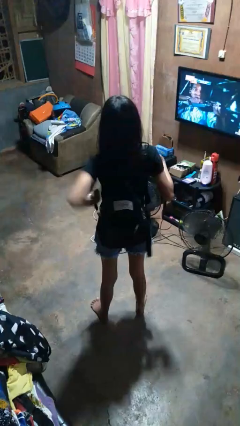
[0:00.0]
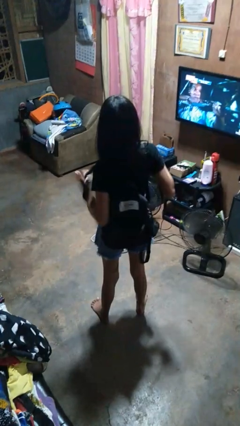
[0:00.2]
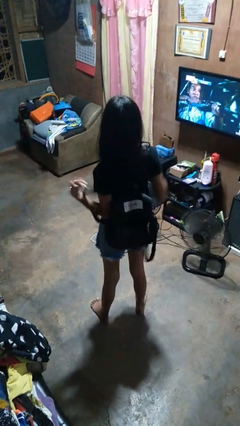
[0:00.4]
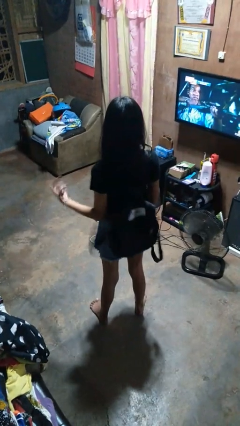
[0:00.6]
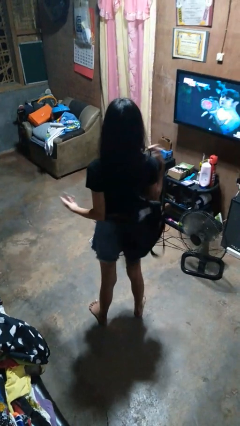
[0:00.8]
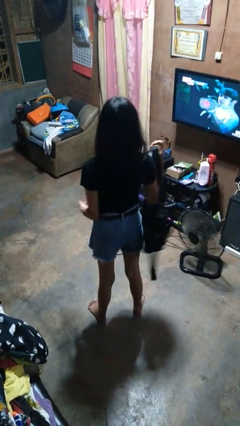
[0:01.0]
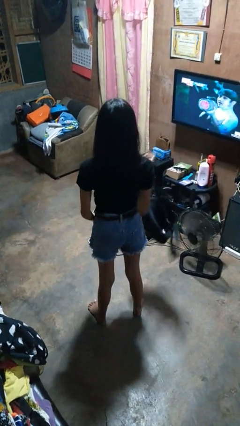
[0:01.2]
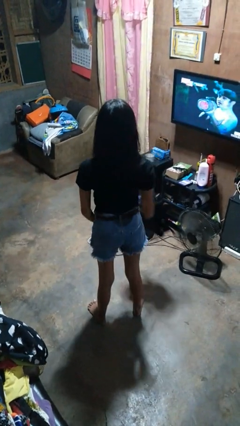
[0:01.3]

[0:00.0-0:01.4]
person takes off backpack

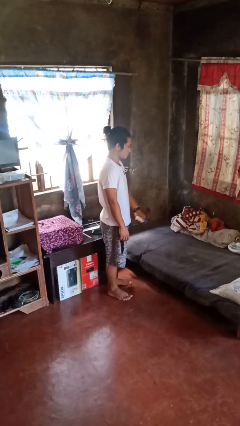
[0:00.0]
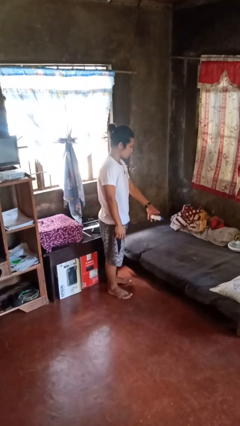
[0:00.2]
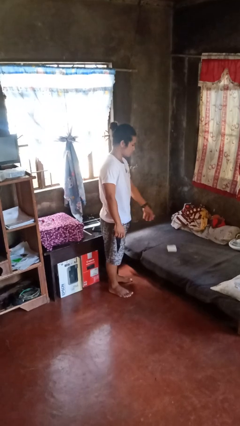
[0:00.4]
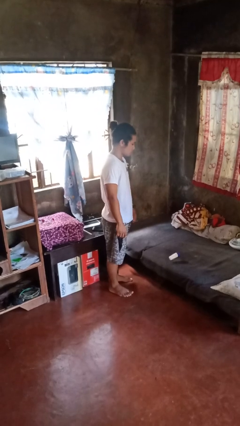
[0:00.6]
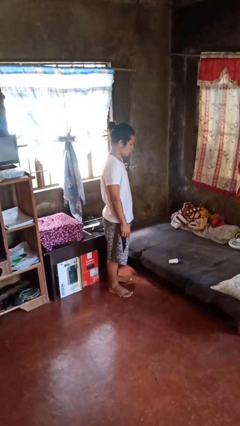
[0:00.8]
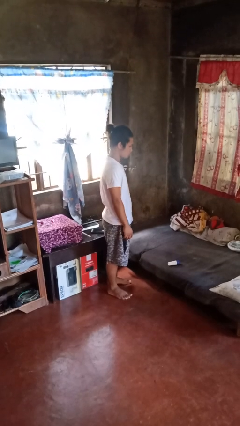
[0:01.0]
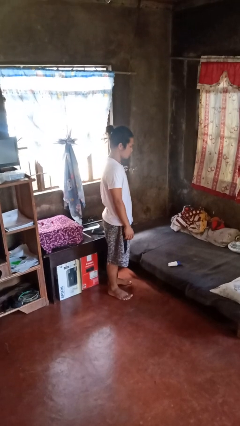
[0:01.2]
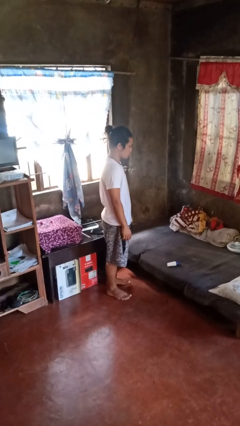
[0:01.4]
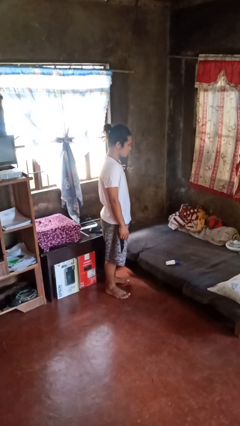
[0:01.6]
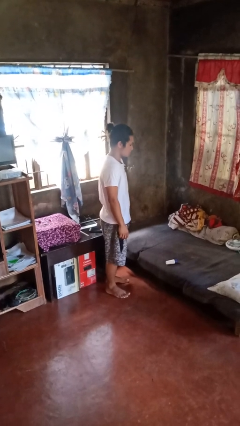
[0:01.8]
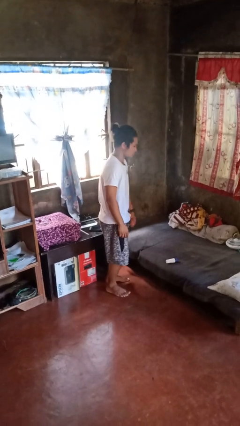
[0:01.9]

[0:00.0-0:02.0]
person throws object on bed

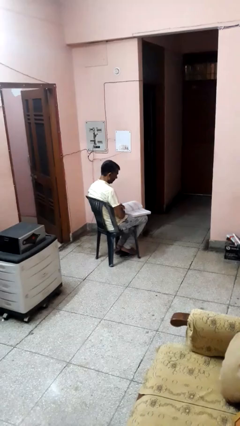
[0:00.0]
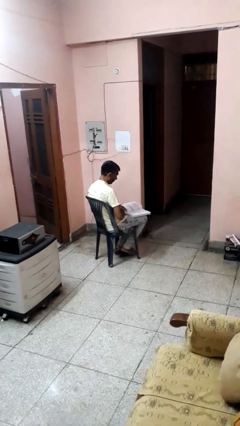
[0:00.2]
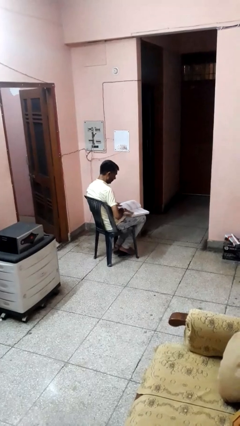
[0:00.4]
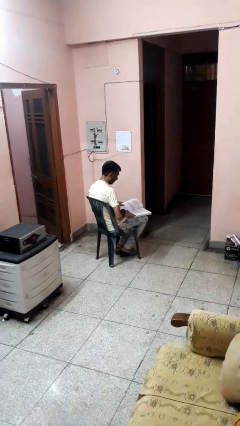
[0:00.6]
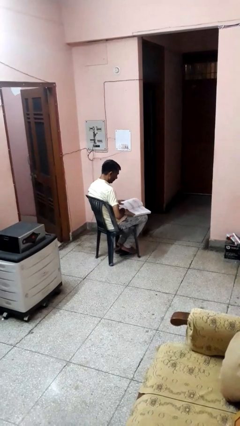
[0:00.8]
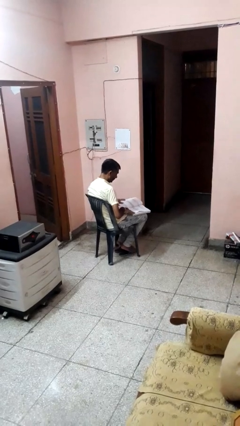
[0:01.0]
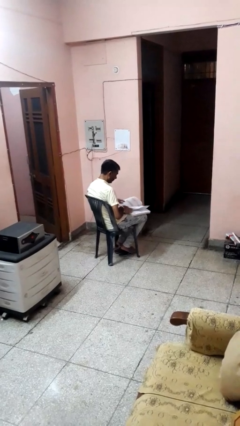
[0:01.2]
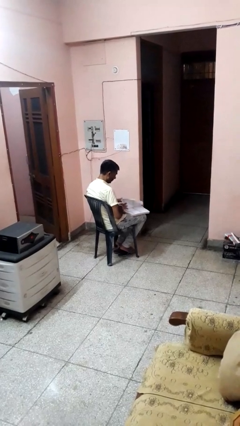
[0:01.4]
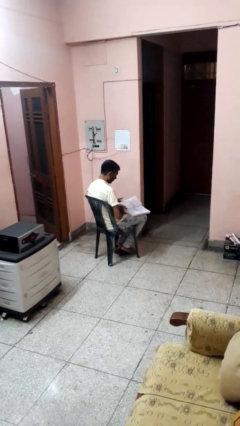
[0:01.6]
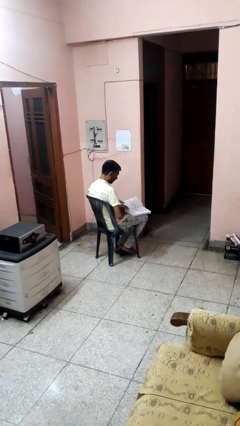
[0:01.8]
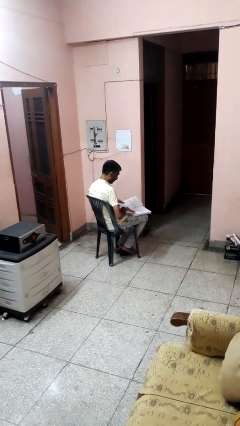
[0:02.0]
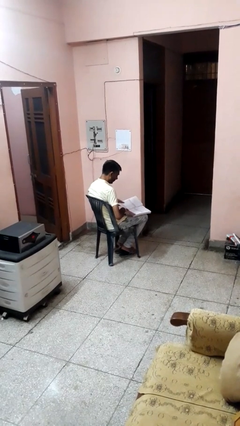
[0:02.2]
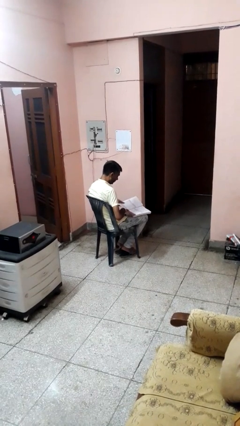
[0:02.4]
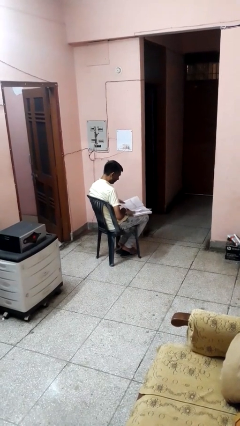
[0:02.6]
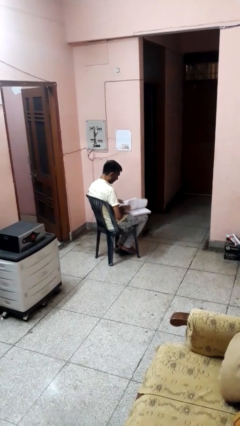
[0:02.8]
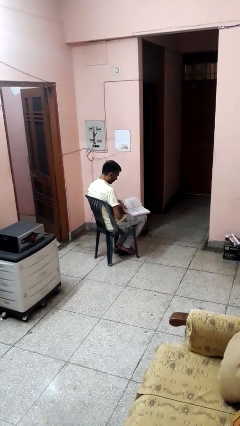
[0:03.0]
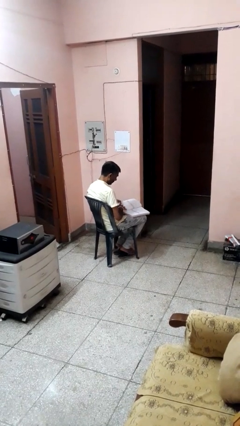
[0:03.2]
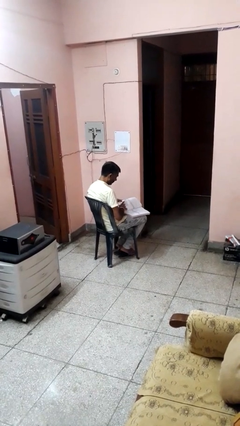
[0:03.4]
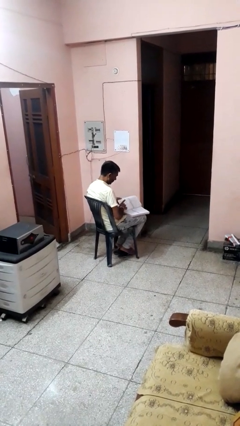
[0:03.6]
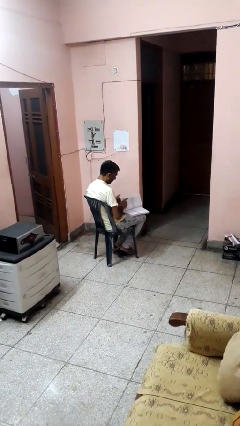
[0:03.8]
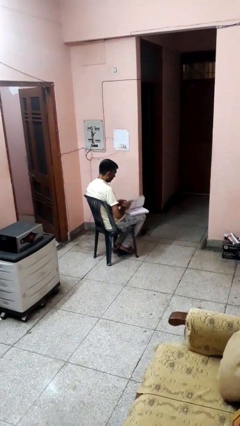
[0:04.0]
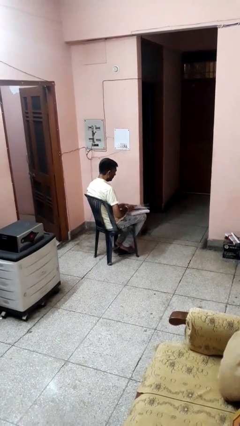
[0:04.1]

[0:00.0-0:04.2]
person reads book

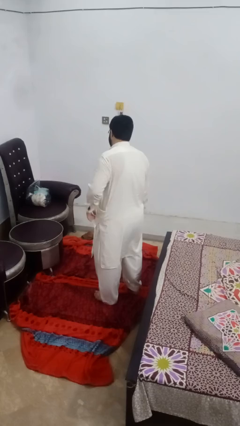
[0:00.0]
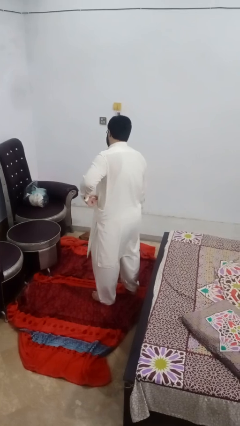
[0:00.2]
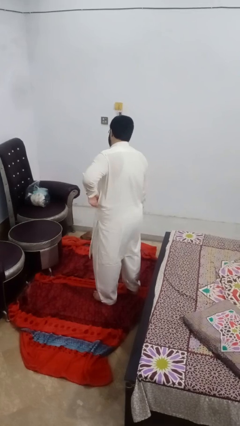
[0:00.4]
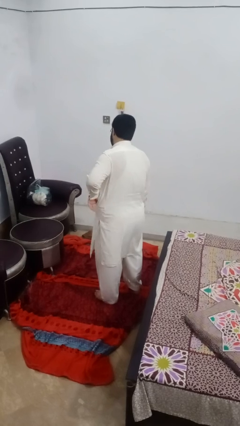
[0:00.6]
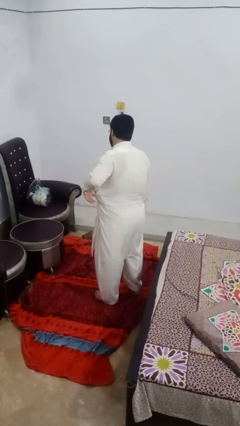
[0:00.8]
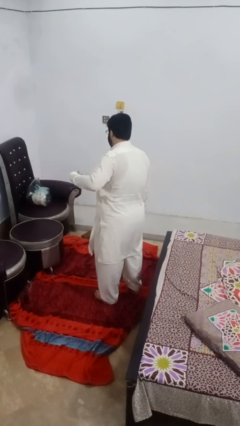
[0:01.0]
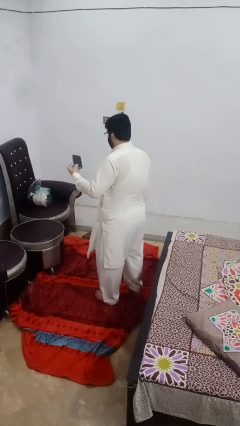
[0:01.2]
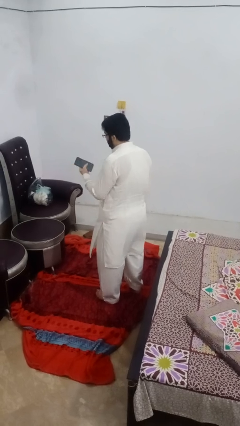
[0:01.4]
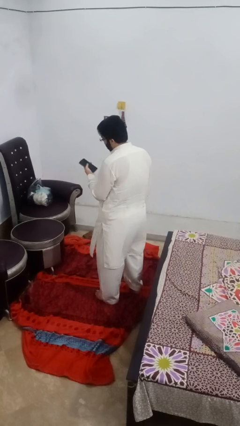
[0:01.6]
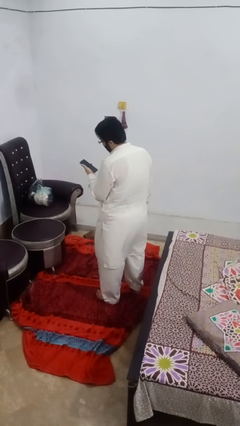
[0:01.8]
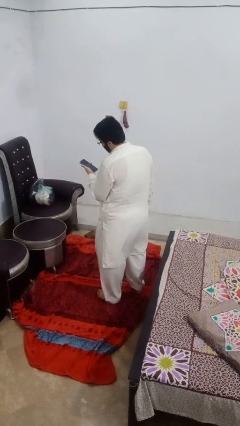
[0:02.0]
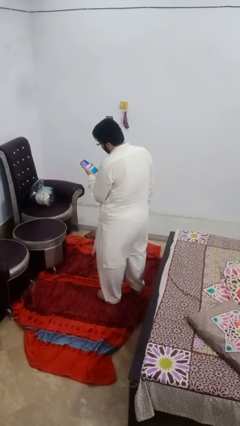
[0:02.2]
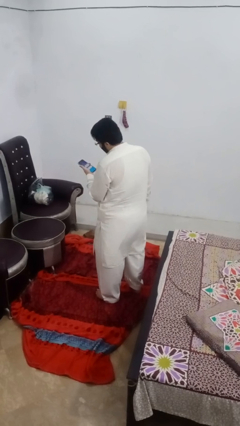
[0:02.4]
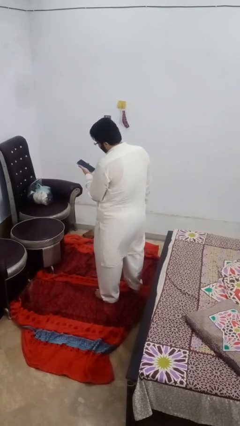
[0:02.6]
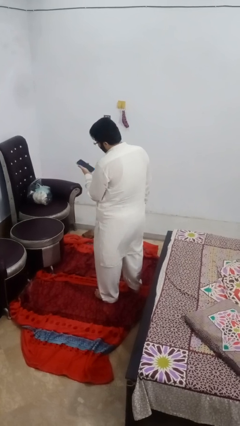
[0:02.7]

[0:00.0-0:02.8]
person takes phone from pocket

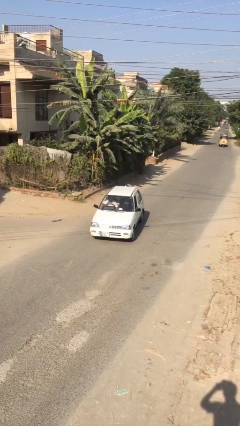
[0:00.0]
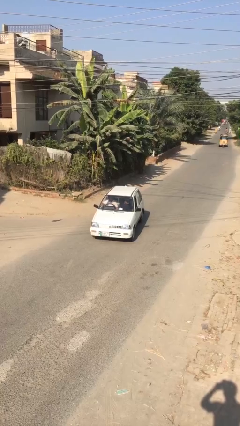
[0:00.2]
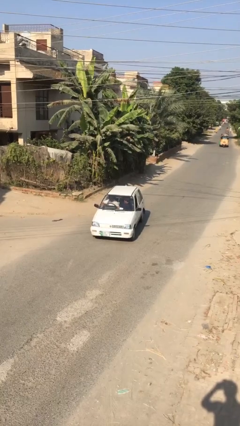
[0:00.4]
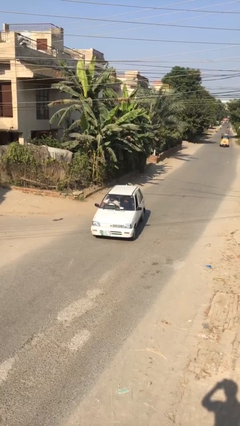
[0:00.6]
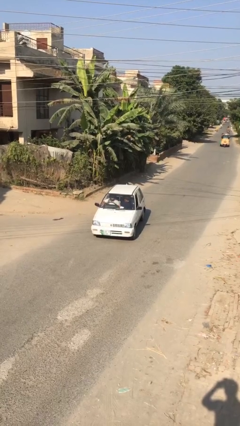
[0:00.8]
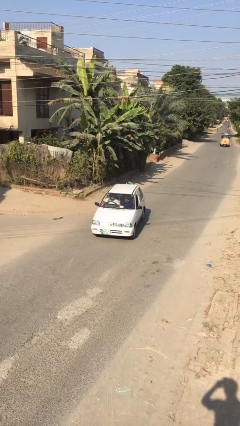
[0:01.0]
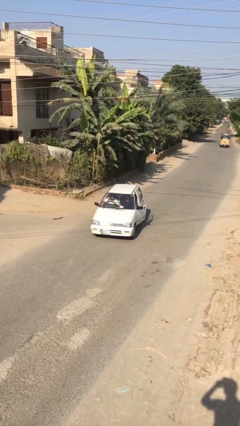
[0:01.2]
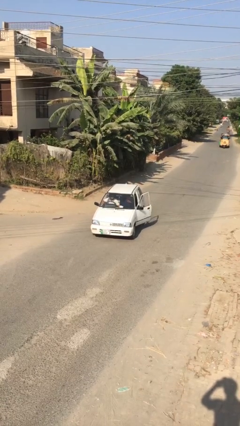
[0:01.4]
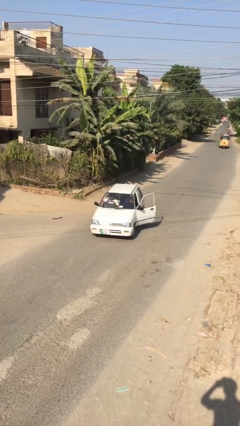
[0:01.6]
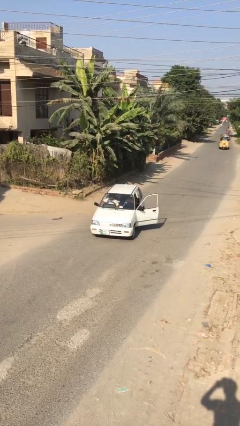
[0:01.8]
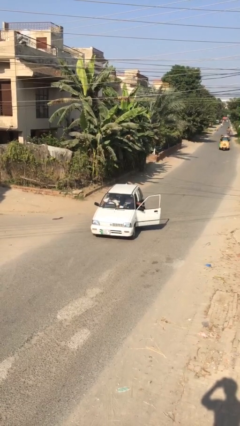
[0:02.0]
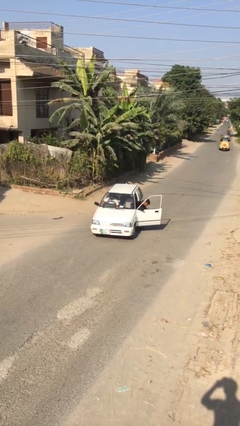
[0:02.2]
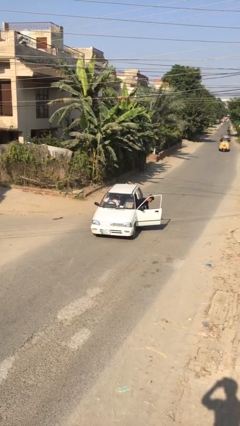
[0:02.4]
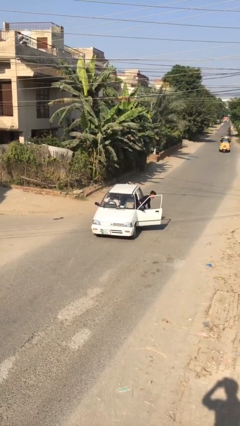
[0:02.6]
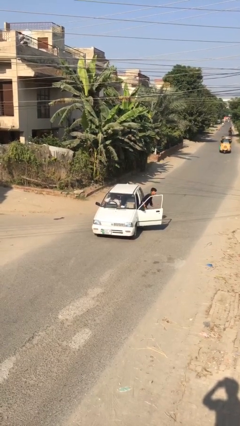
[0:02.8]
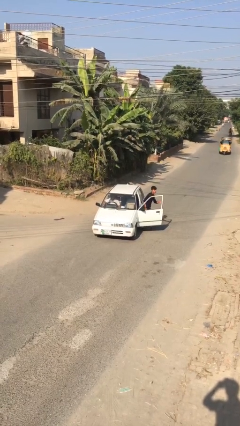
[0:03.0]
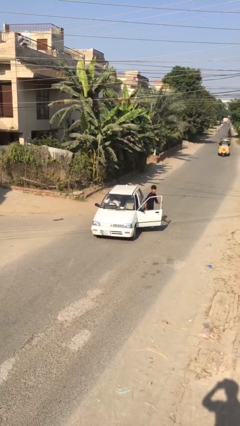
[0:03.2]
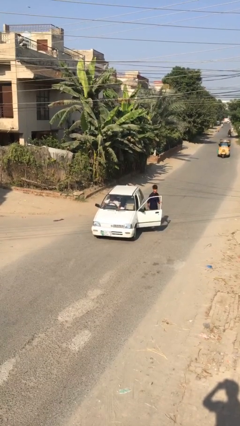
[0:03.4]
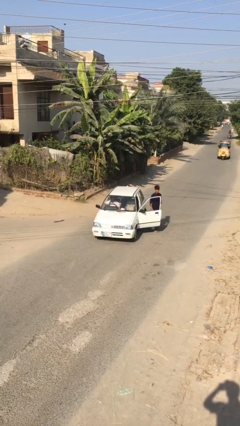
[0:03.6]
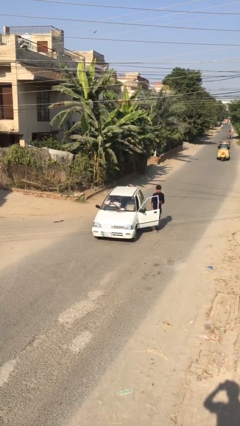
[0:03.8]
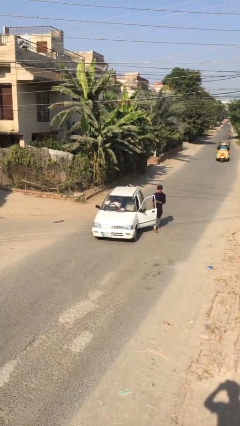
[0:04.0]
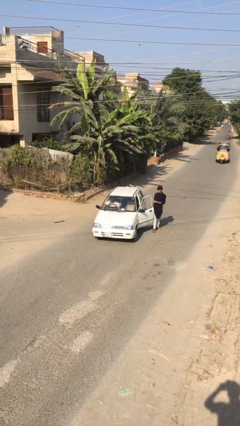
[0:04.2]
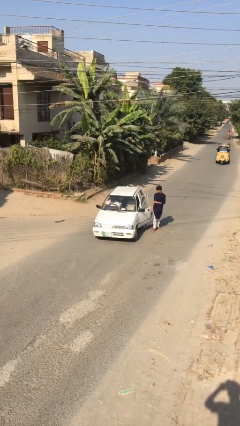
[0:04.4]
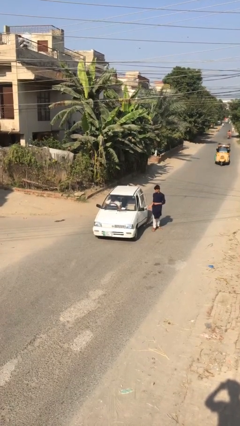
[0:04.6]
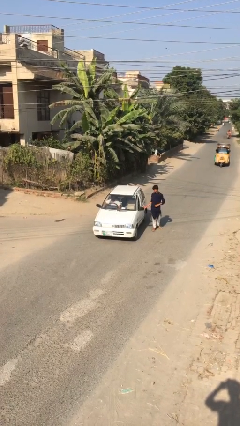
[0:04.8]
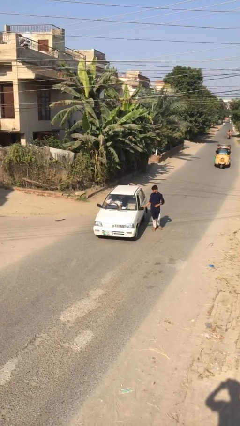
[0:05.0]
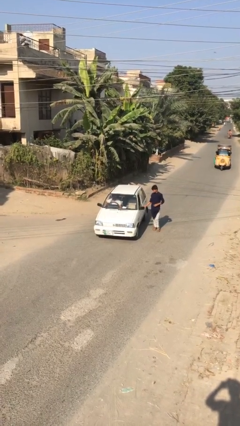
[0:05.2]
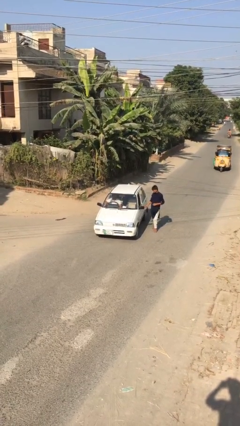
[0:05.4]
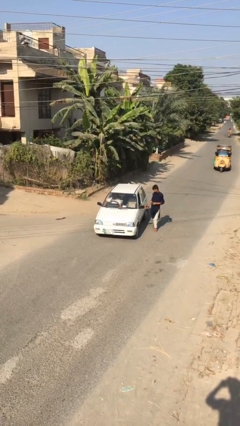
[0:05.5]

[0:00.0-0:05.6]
car drops off person

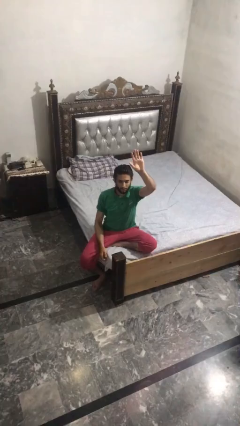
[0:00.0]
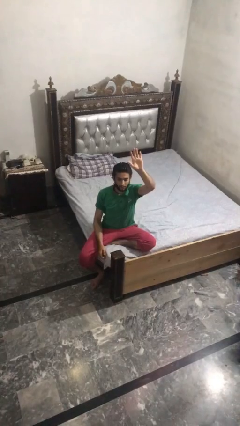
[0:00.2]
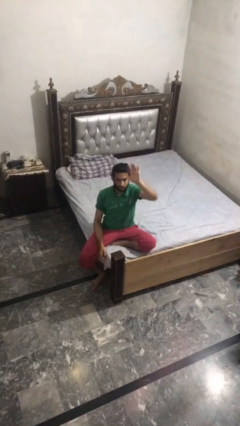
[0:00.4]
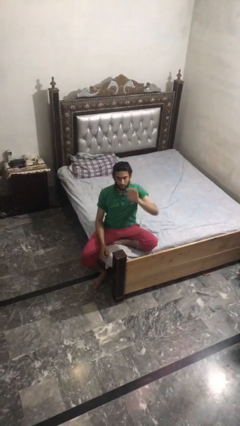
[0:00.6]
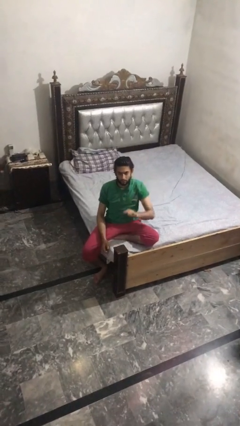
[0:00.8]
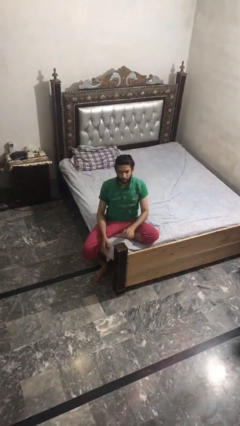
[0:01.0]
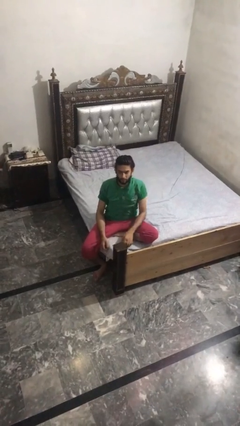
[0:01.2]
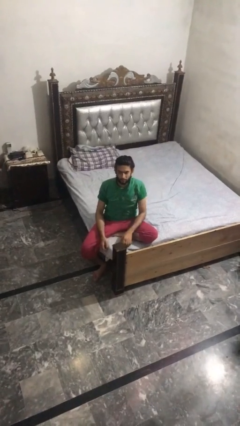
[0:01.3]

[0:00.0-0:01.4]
person gestures lower hand

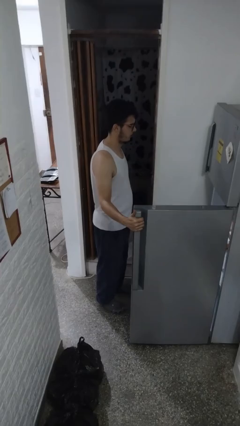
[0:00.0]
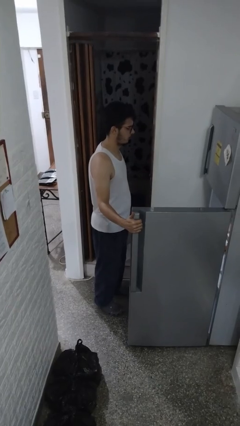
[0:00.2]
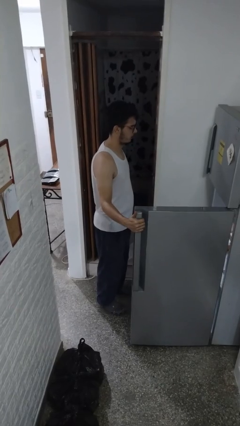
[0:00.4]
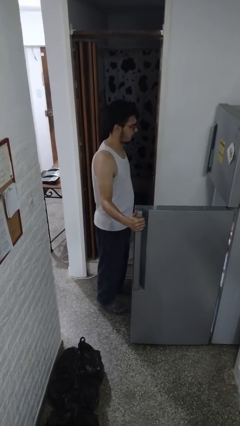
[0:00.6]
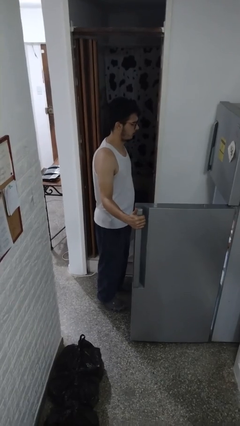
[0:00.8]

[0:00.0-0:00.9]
person takes object from refrigerator
